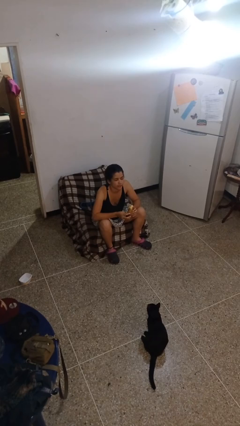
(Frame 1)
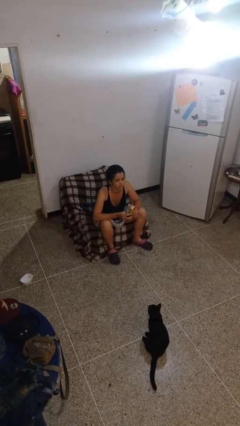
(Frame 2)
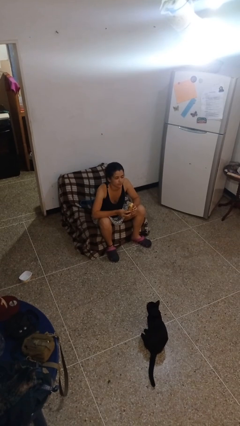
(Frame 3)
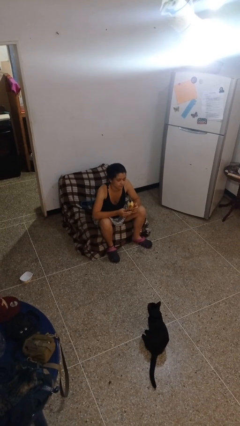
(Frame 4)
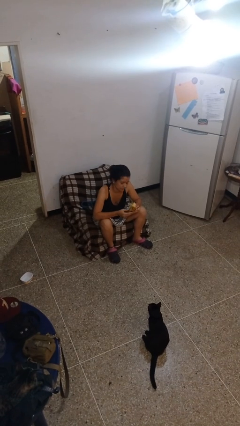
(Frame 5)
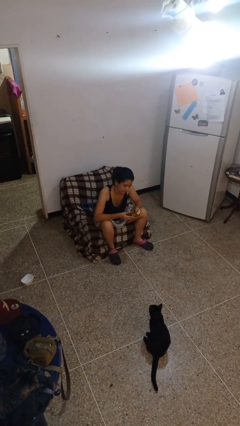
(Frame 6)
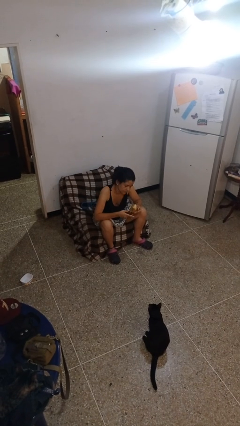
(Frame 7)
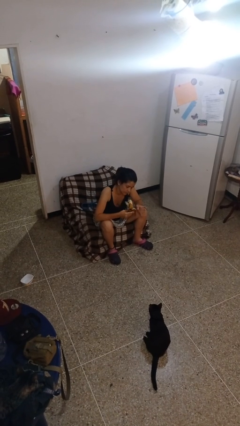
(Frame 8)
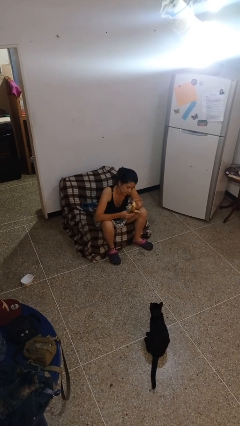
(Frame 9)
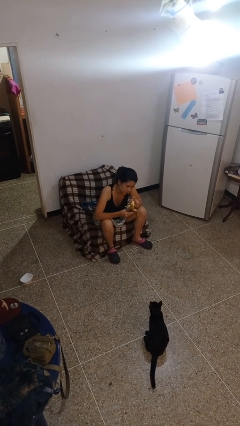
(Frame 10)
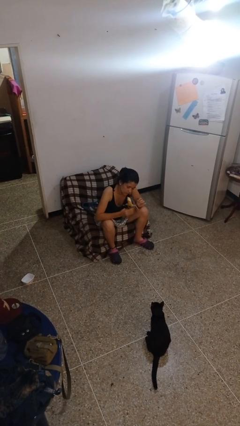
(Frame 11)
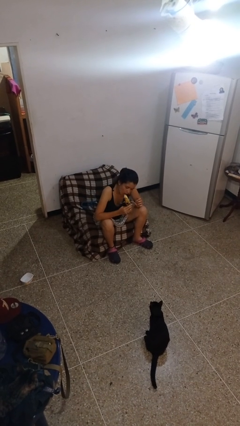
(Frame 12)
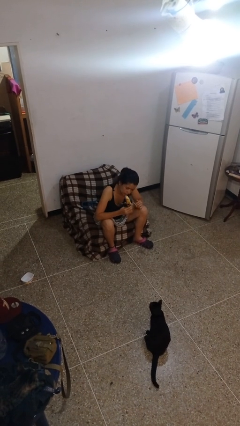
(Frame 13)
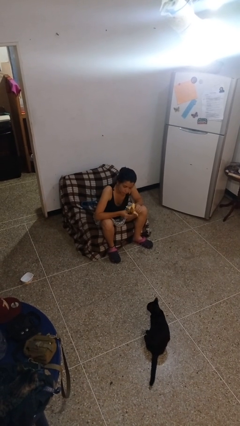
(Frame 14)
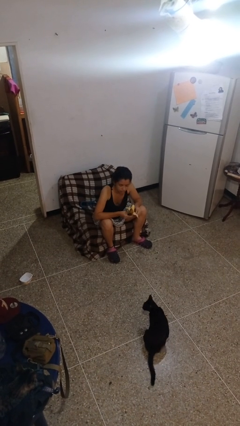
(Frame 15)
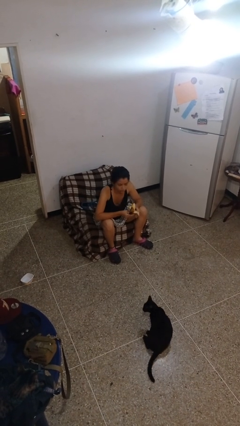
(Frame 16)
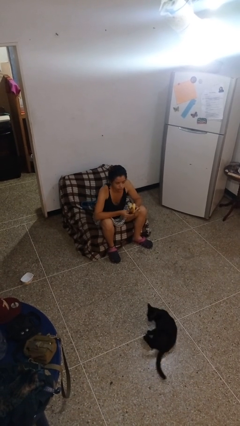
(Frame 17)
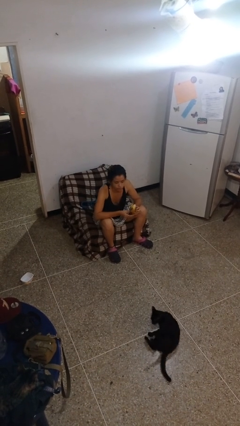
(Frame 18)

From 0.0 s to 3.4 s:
person eats banana

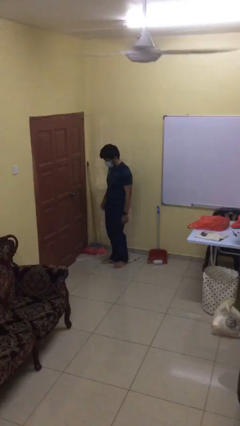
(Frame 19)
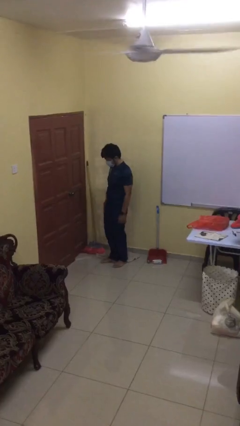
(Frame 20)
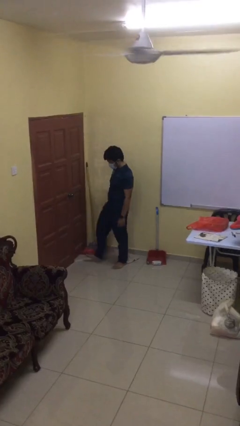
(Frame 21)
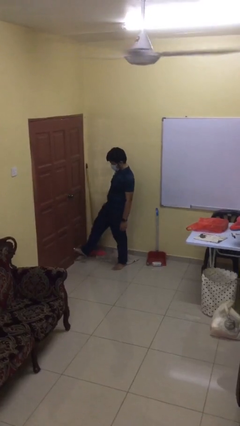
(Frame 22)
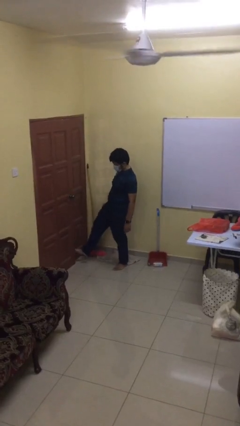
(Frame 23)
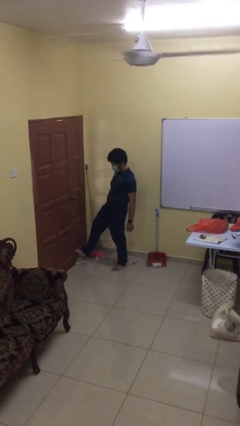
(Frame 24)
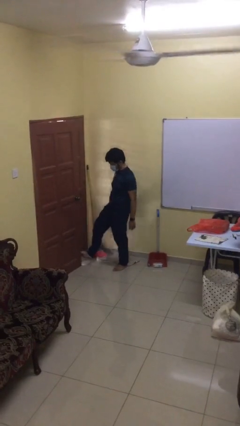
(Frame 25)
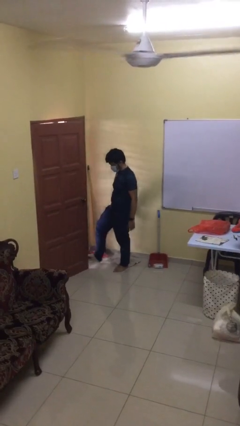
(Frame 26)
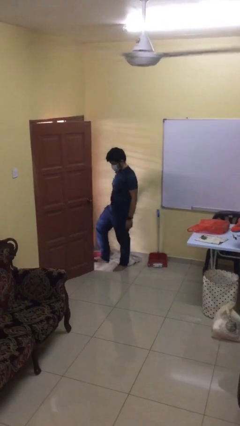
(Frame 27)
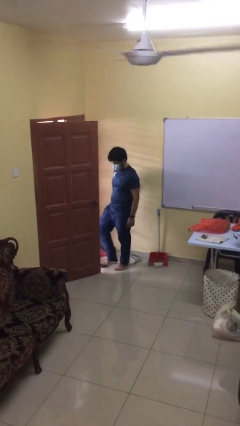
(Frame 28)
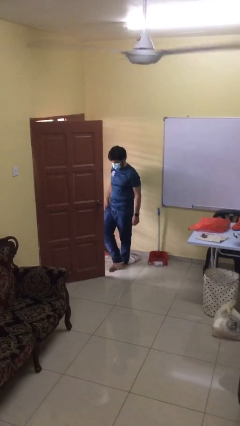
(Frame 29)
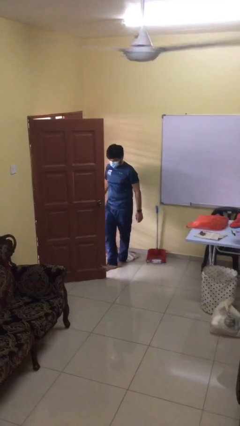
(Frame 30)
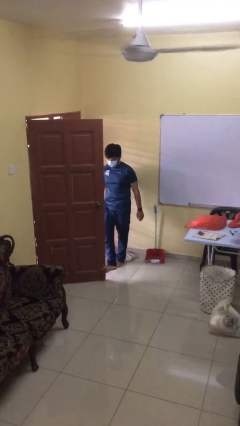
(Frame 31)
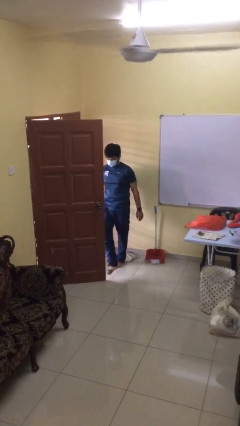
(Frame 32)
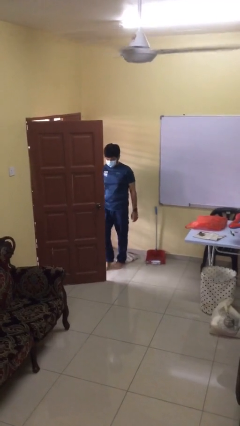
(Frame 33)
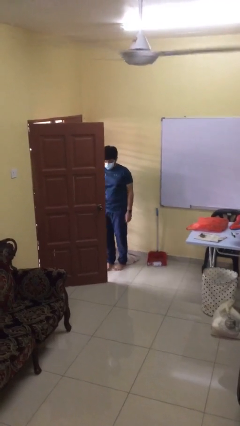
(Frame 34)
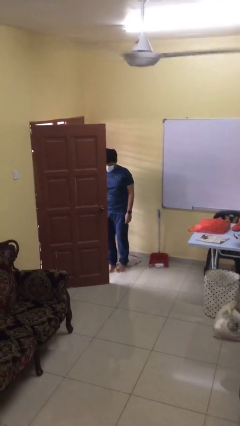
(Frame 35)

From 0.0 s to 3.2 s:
person opens facility door

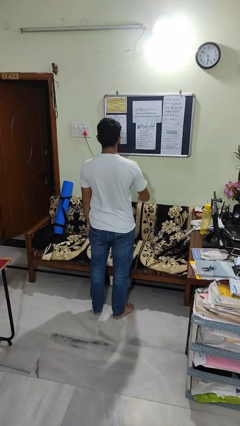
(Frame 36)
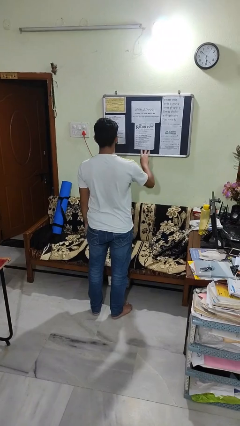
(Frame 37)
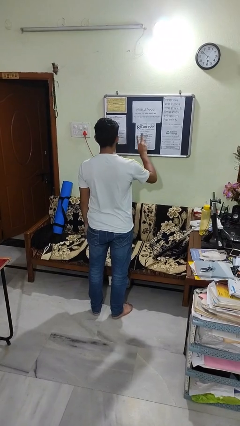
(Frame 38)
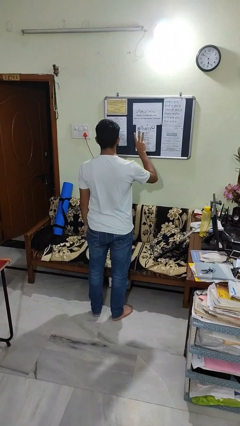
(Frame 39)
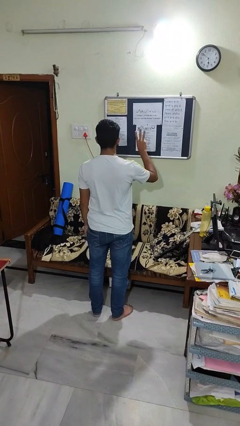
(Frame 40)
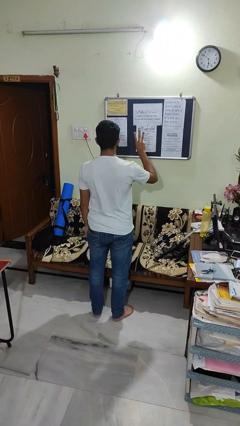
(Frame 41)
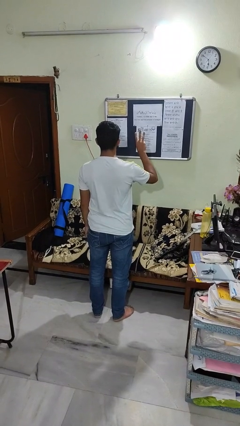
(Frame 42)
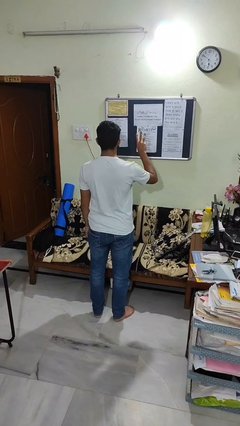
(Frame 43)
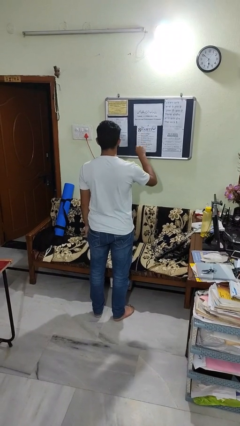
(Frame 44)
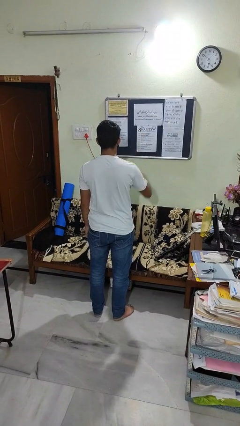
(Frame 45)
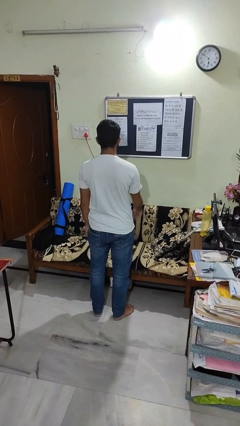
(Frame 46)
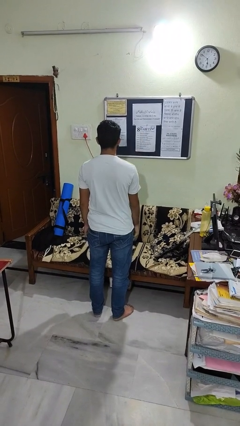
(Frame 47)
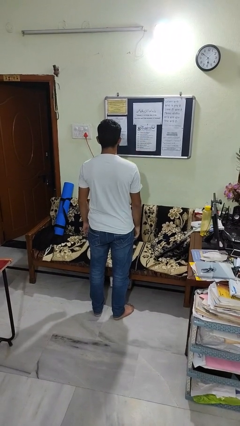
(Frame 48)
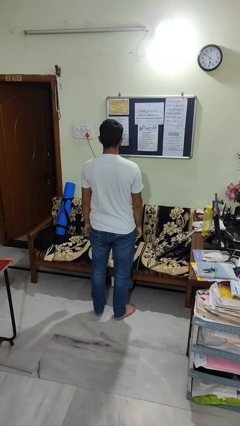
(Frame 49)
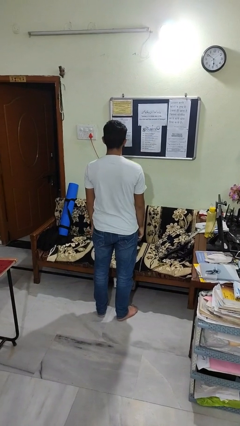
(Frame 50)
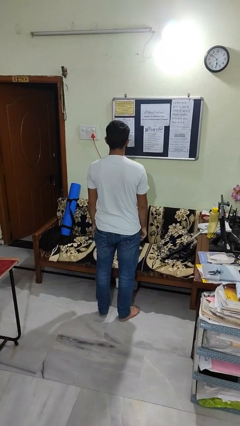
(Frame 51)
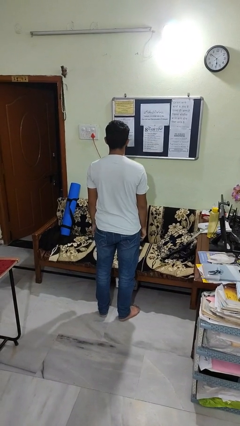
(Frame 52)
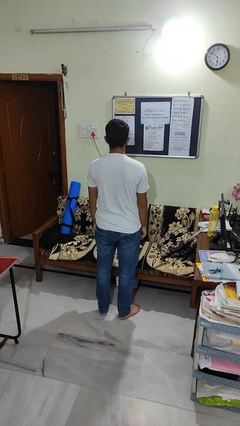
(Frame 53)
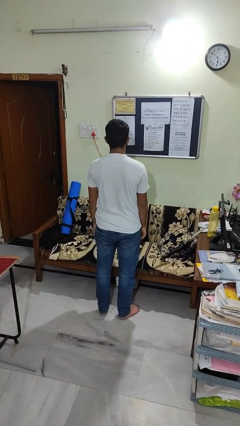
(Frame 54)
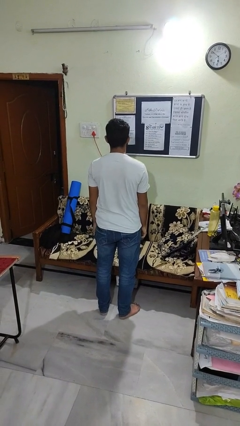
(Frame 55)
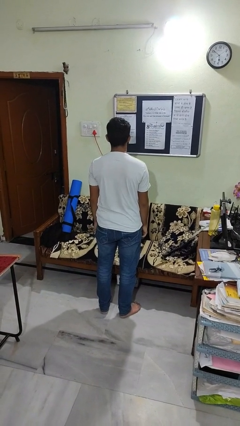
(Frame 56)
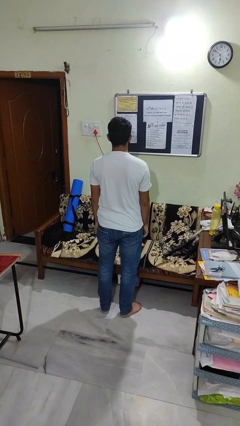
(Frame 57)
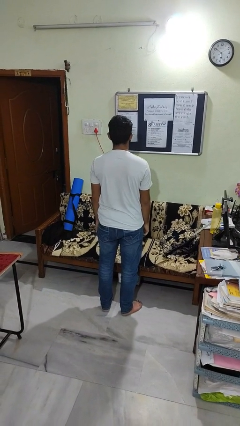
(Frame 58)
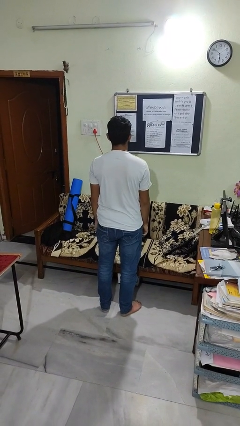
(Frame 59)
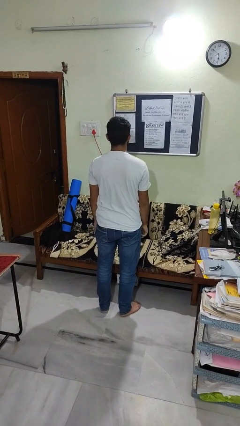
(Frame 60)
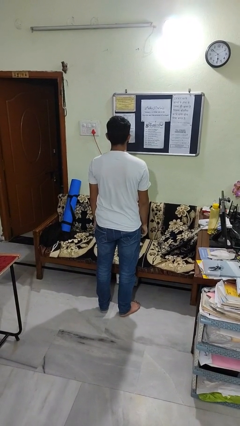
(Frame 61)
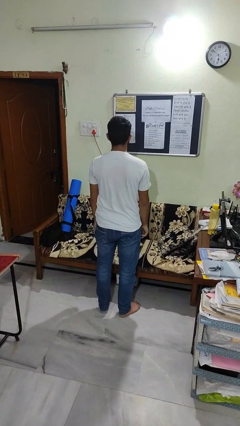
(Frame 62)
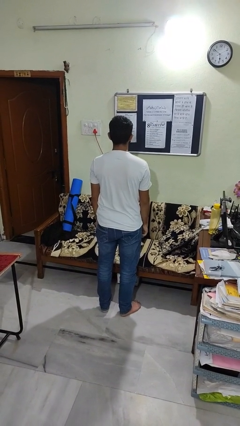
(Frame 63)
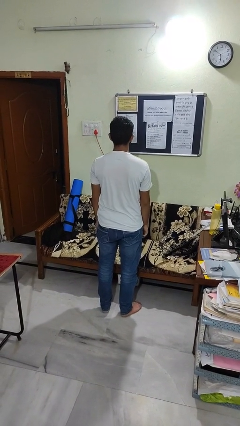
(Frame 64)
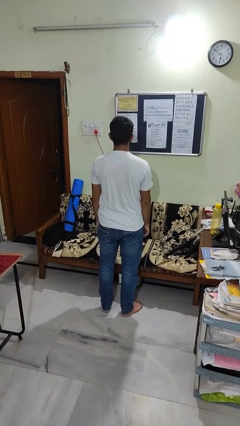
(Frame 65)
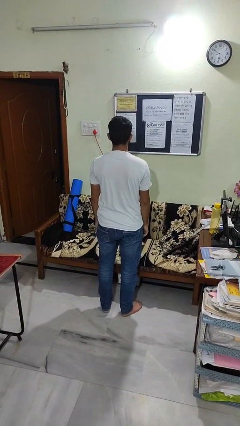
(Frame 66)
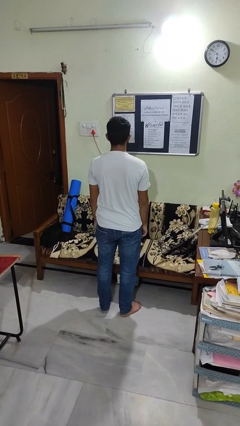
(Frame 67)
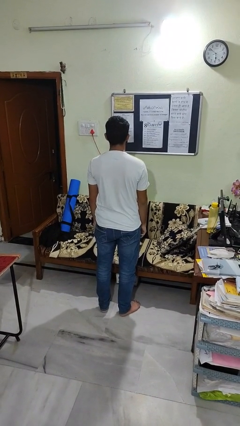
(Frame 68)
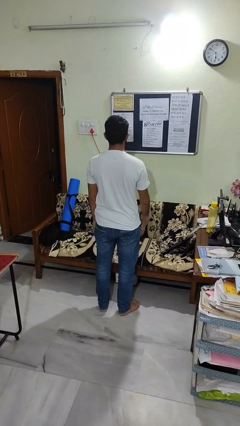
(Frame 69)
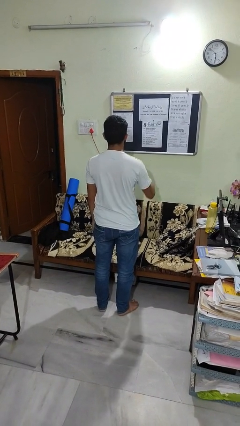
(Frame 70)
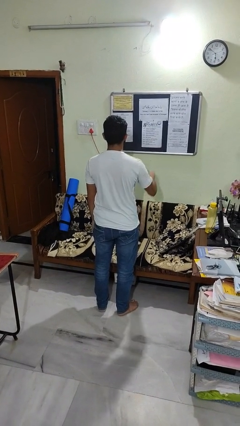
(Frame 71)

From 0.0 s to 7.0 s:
person gestures number three

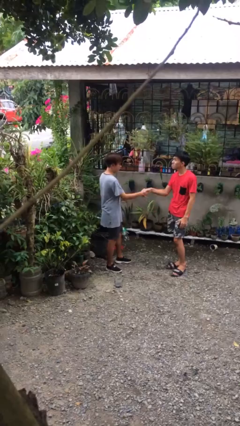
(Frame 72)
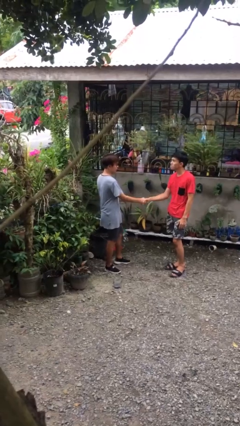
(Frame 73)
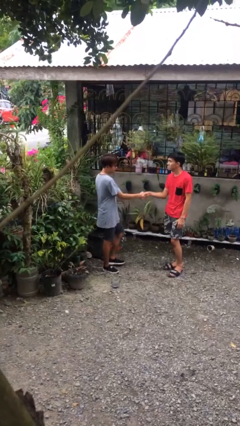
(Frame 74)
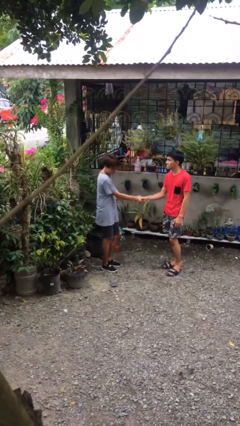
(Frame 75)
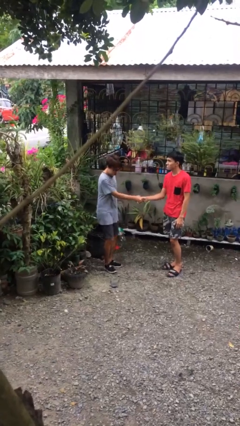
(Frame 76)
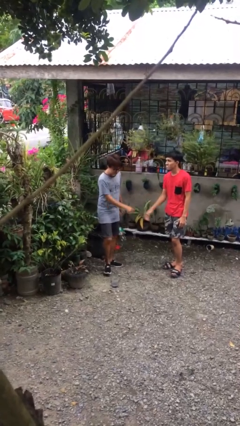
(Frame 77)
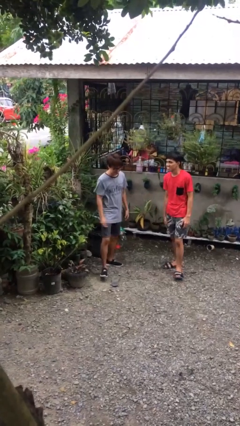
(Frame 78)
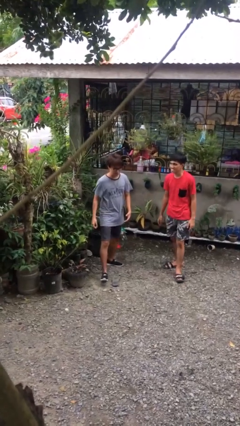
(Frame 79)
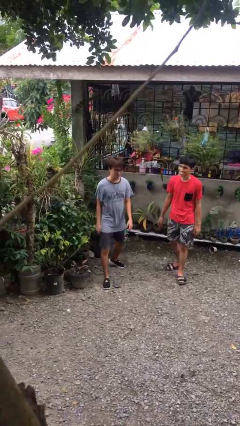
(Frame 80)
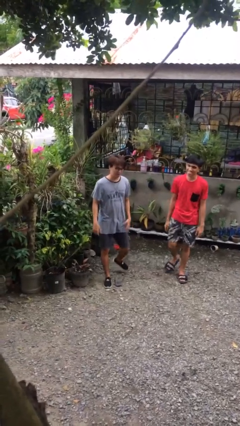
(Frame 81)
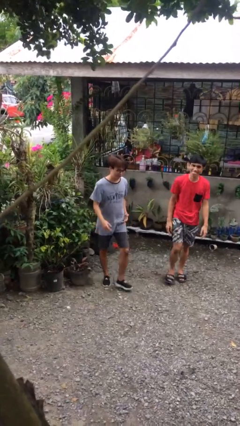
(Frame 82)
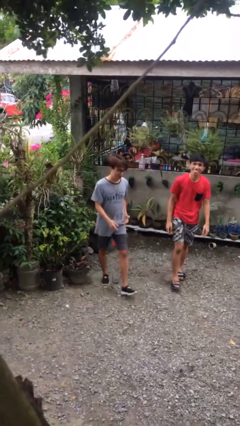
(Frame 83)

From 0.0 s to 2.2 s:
person shakes hand

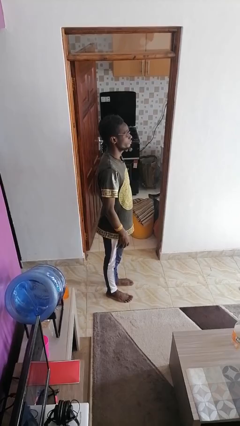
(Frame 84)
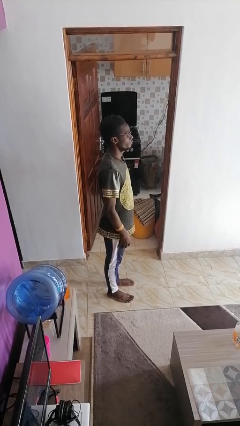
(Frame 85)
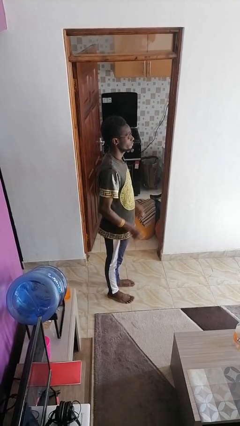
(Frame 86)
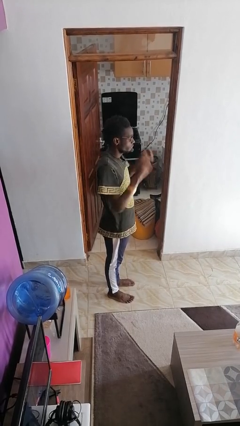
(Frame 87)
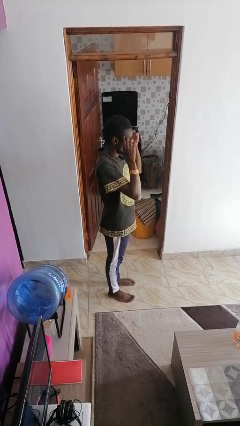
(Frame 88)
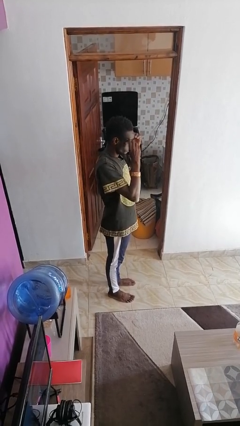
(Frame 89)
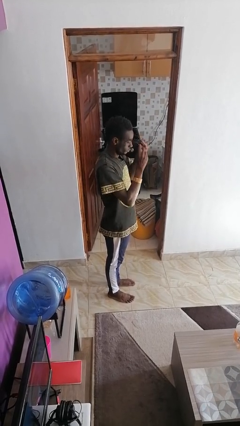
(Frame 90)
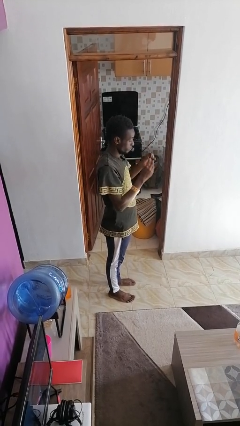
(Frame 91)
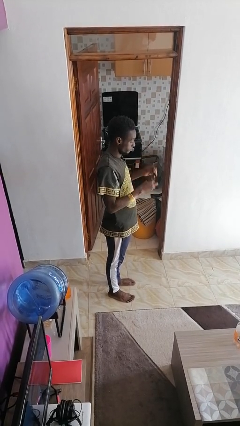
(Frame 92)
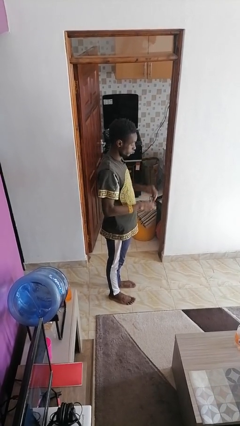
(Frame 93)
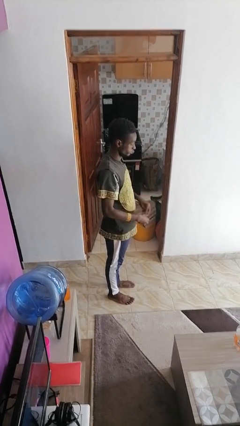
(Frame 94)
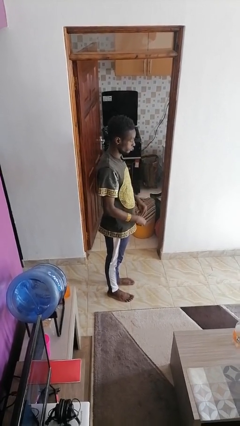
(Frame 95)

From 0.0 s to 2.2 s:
person takes off glasses
